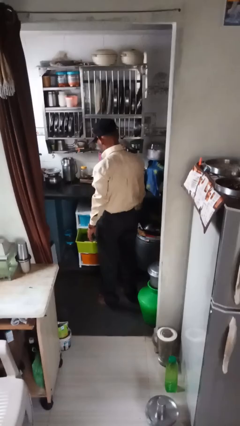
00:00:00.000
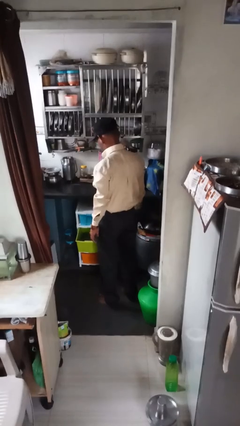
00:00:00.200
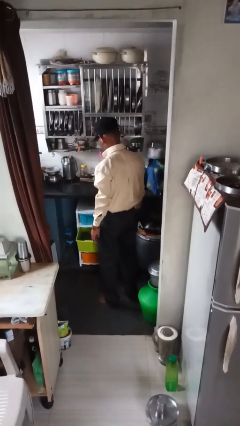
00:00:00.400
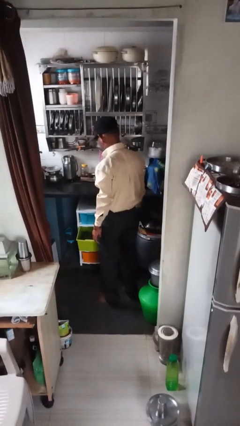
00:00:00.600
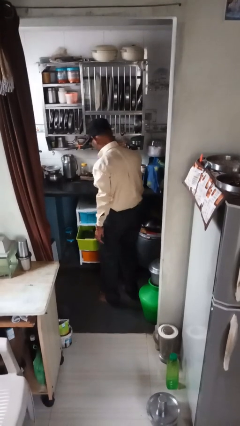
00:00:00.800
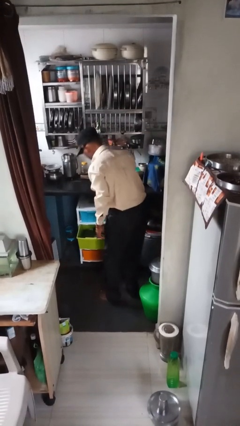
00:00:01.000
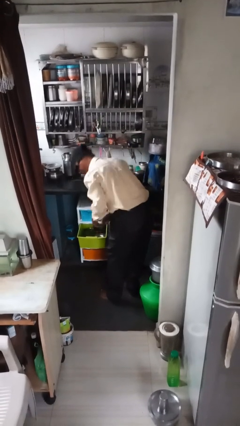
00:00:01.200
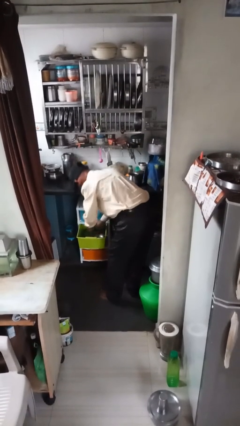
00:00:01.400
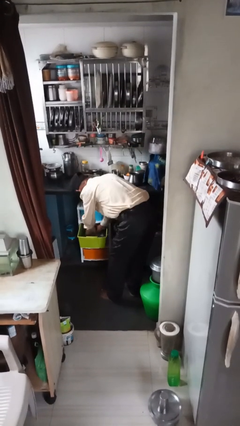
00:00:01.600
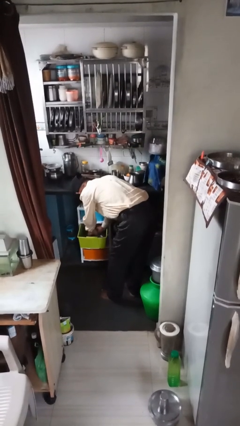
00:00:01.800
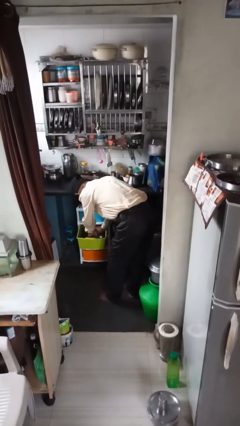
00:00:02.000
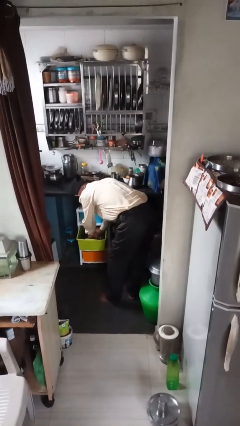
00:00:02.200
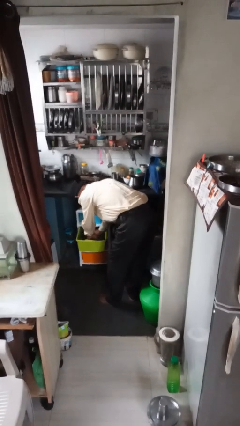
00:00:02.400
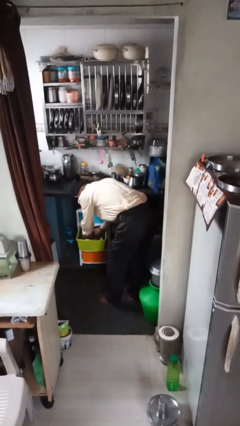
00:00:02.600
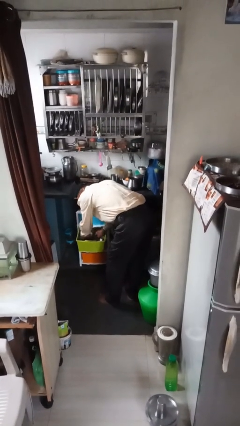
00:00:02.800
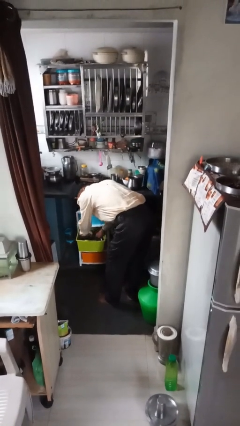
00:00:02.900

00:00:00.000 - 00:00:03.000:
person searches in kitchen drawer

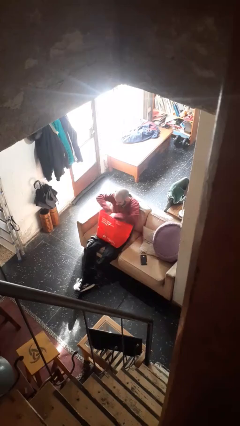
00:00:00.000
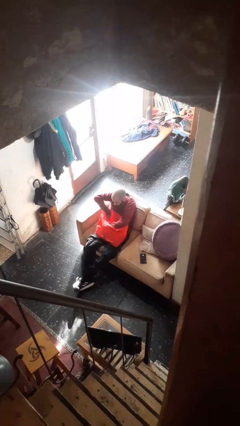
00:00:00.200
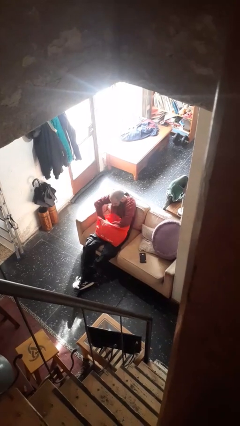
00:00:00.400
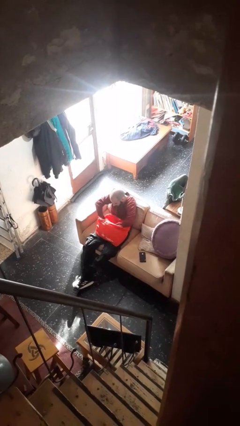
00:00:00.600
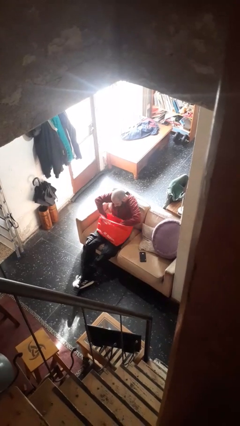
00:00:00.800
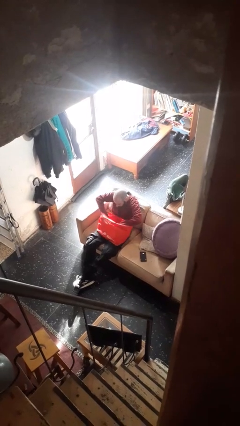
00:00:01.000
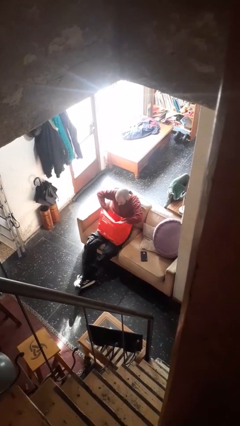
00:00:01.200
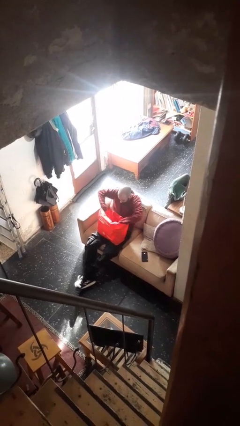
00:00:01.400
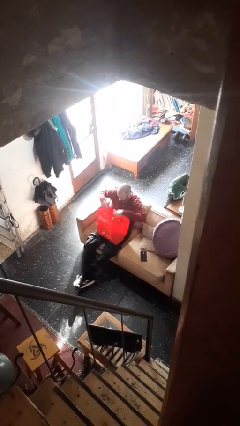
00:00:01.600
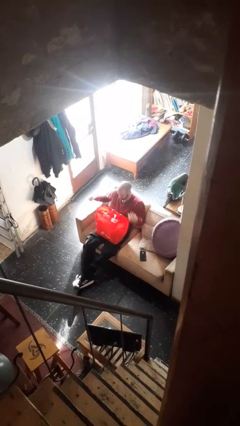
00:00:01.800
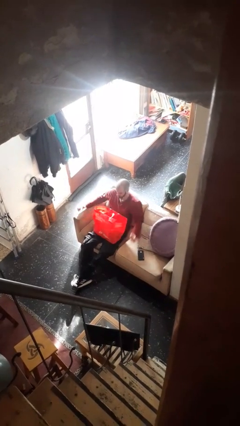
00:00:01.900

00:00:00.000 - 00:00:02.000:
person searches in bag

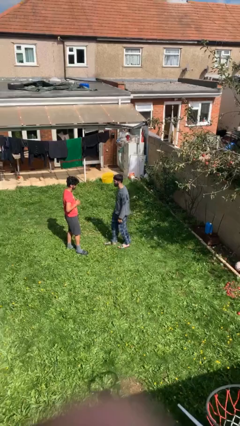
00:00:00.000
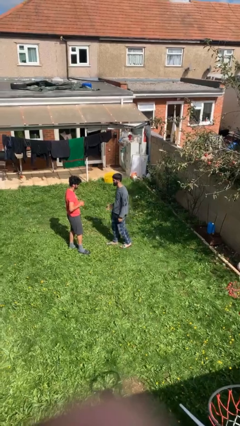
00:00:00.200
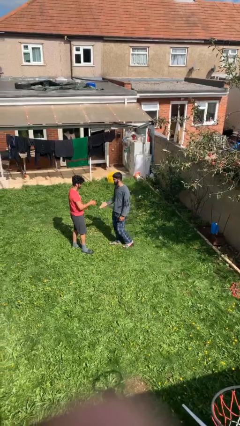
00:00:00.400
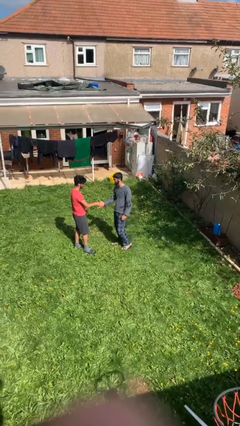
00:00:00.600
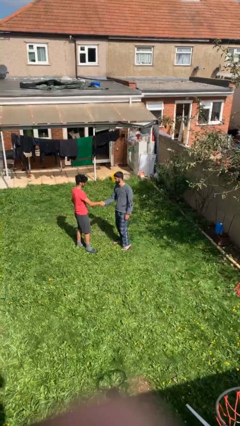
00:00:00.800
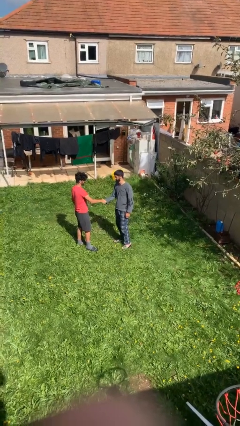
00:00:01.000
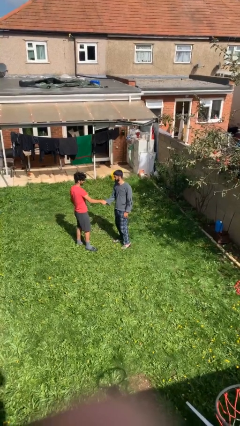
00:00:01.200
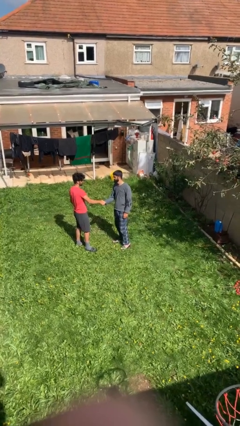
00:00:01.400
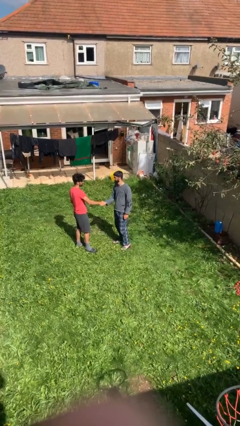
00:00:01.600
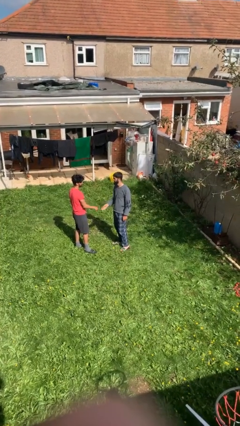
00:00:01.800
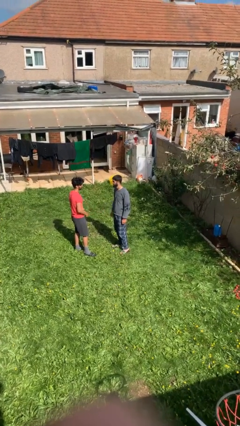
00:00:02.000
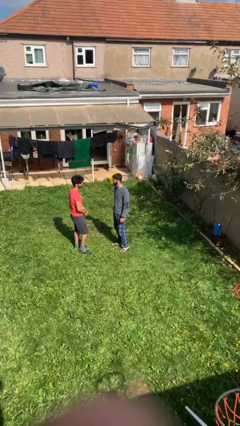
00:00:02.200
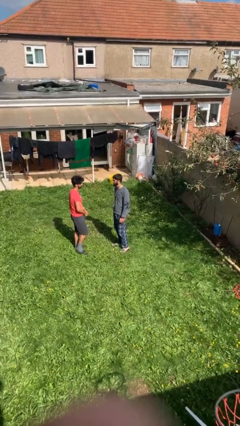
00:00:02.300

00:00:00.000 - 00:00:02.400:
person shakes hand

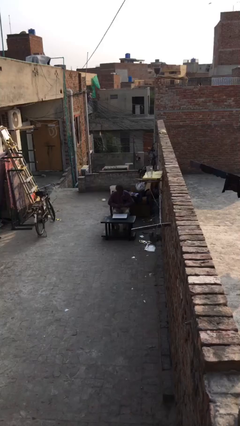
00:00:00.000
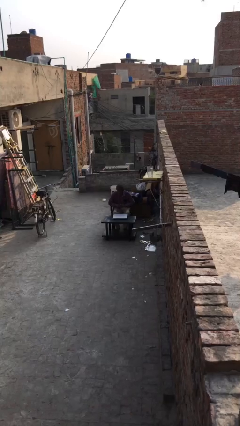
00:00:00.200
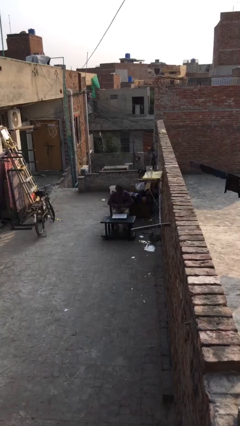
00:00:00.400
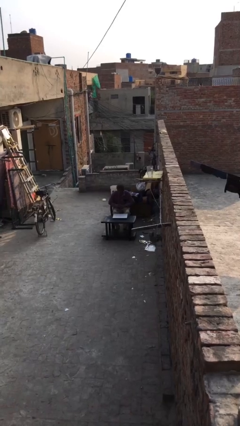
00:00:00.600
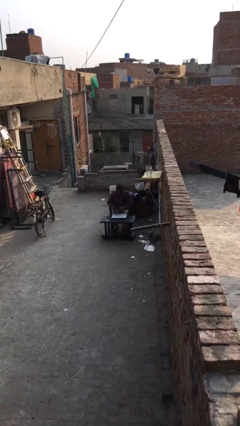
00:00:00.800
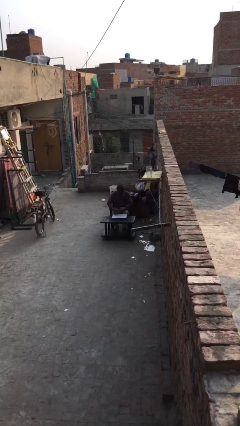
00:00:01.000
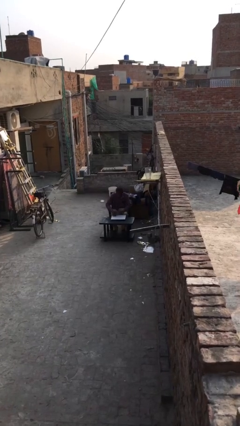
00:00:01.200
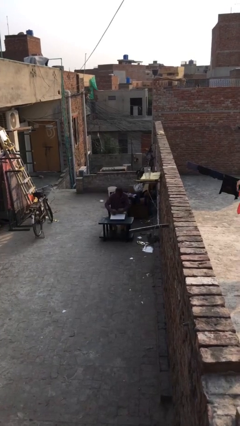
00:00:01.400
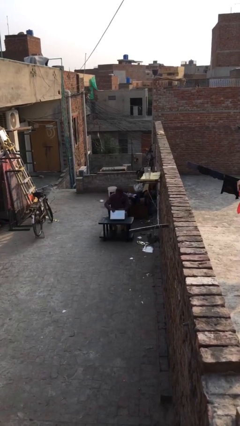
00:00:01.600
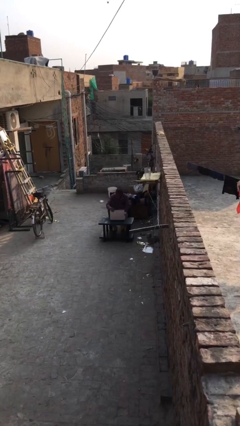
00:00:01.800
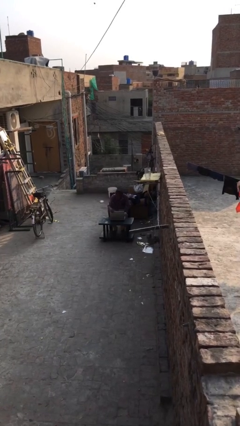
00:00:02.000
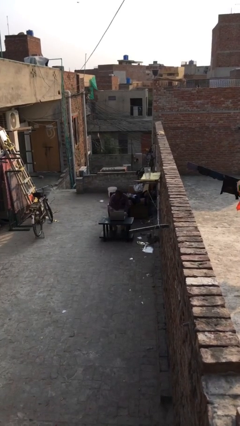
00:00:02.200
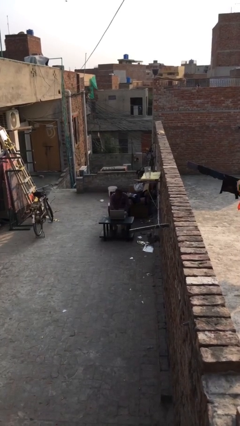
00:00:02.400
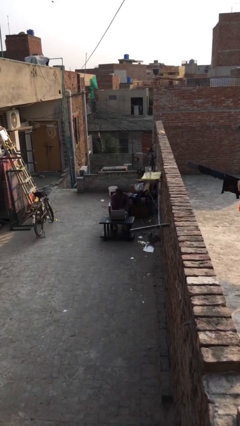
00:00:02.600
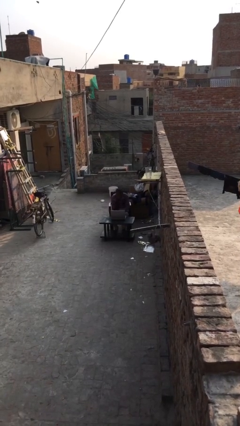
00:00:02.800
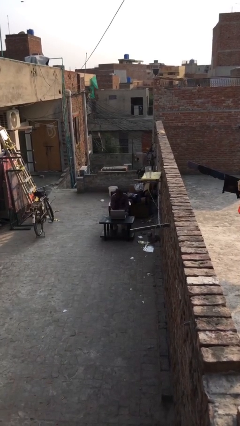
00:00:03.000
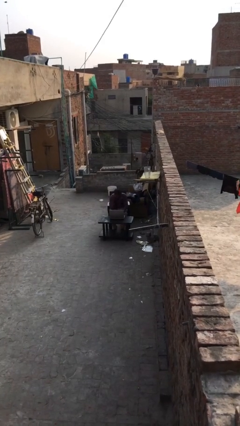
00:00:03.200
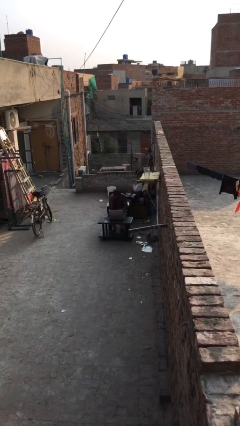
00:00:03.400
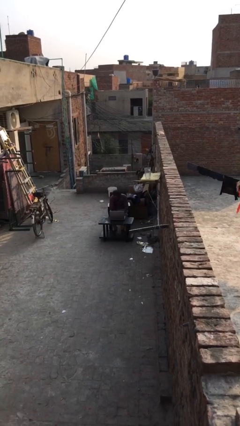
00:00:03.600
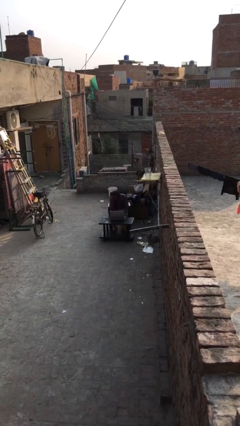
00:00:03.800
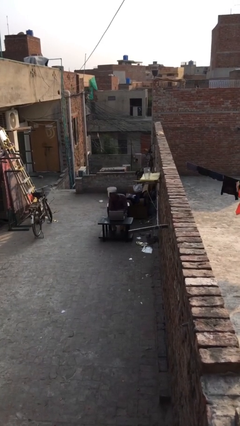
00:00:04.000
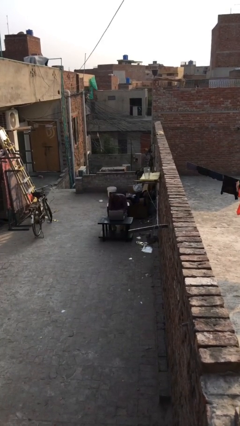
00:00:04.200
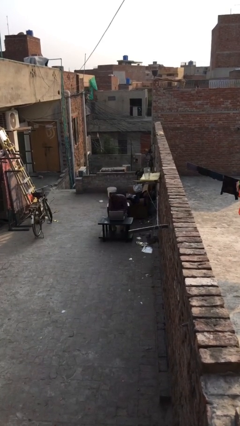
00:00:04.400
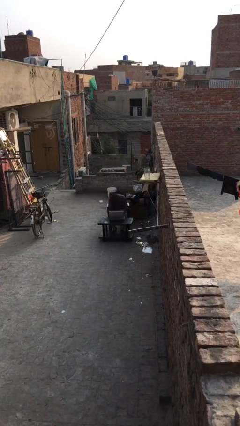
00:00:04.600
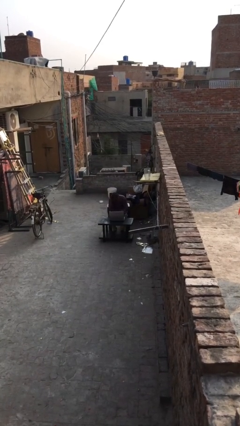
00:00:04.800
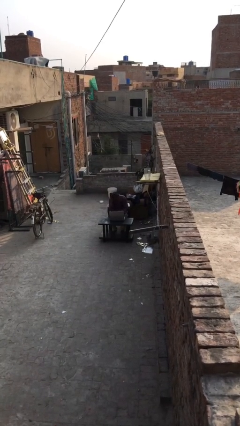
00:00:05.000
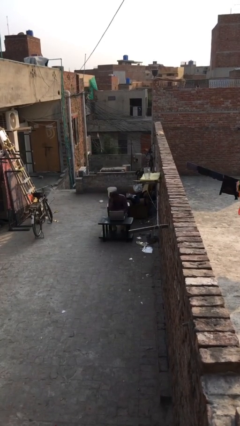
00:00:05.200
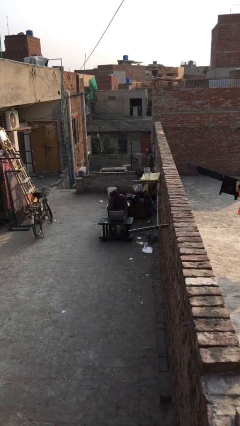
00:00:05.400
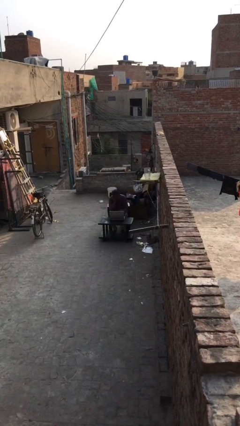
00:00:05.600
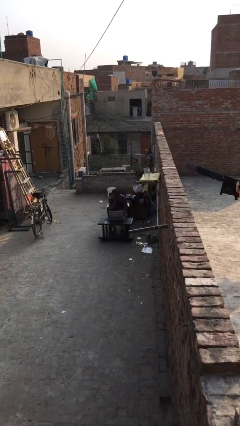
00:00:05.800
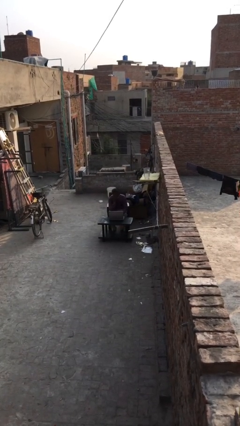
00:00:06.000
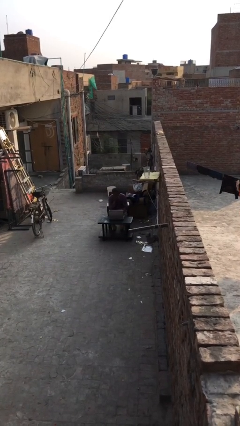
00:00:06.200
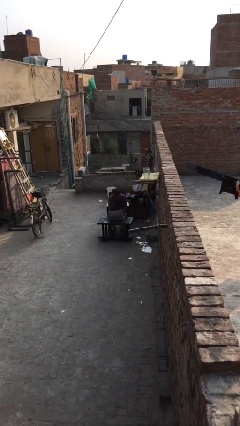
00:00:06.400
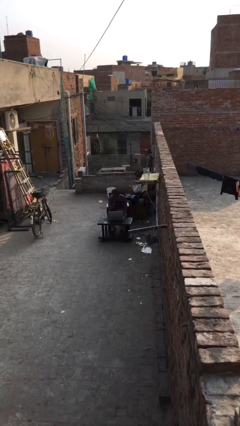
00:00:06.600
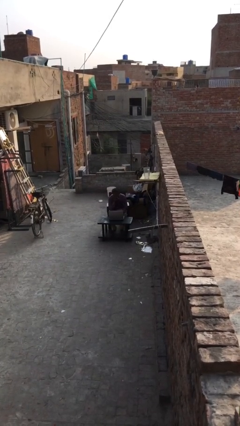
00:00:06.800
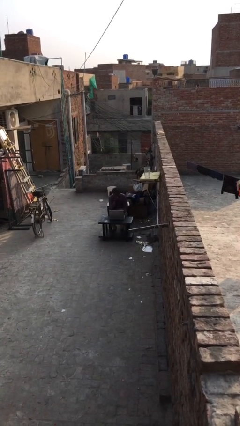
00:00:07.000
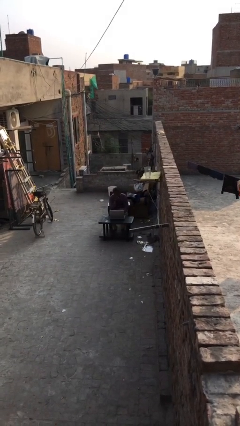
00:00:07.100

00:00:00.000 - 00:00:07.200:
person interacts with laptop

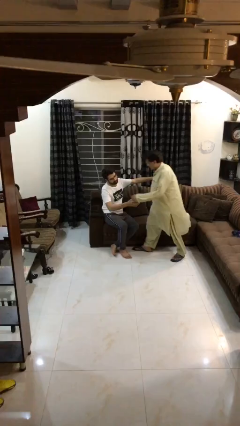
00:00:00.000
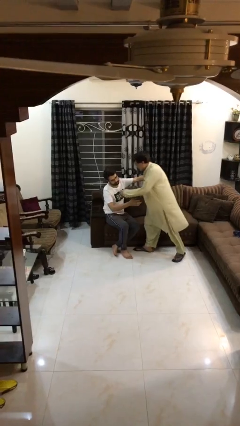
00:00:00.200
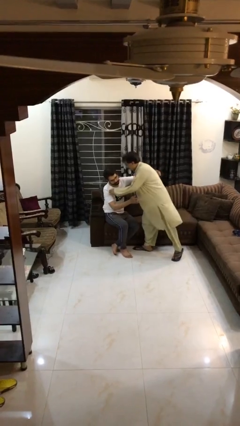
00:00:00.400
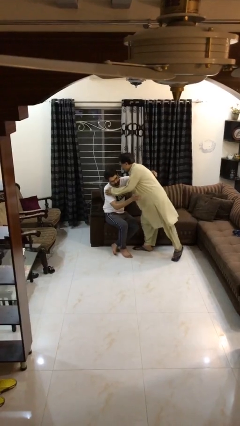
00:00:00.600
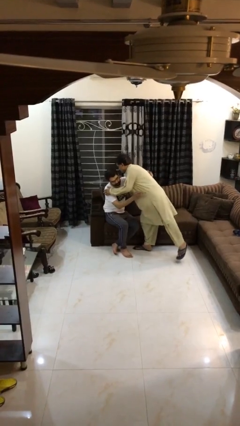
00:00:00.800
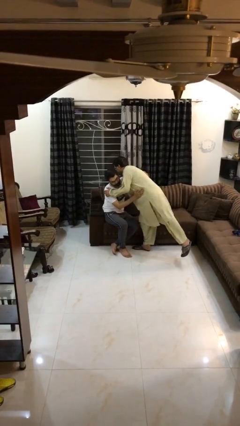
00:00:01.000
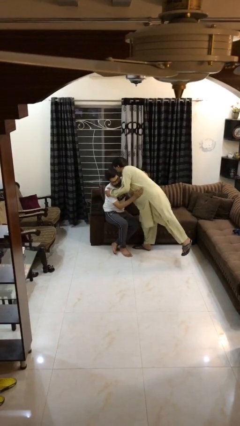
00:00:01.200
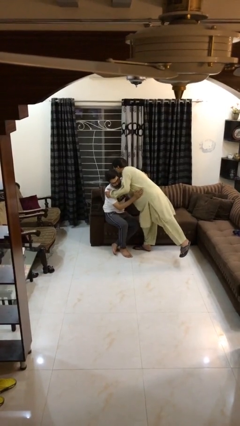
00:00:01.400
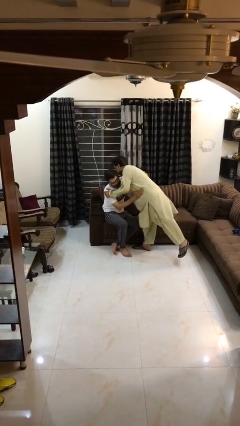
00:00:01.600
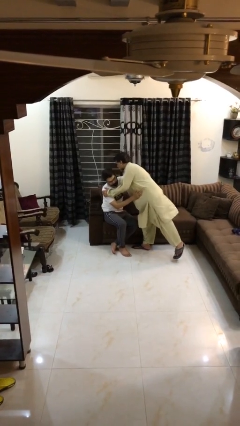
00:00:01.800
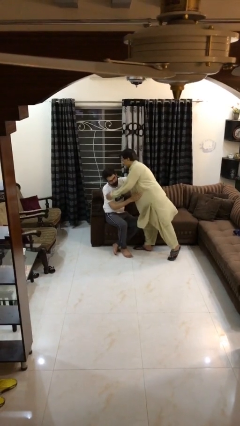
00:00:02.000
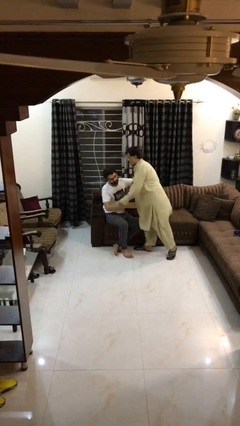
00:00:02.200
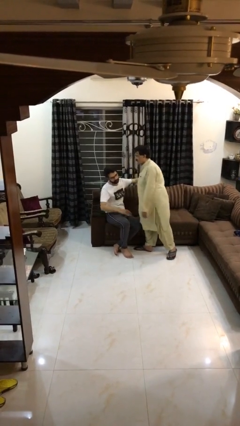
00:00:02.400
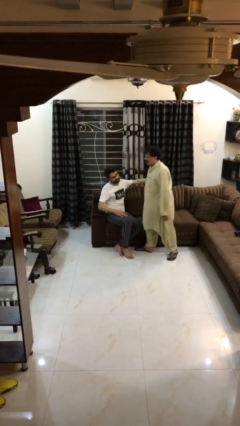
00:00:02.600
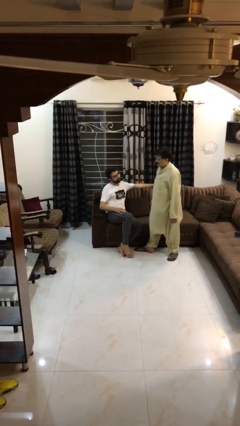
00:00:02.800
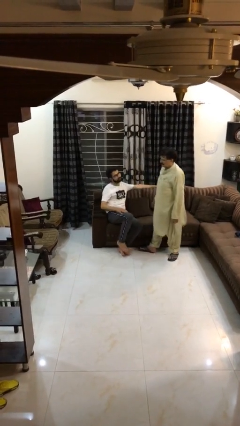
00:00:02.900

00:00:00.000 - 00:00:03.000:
person embraces person
